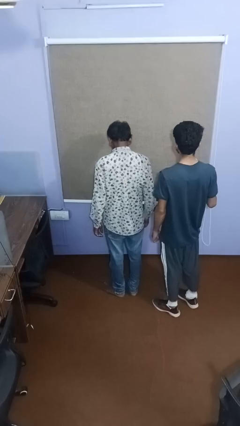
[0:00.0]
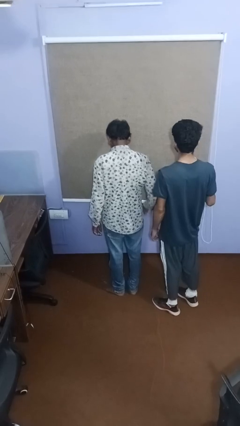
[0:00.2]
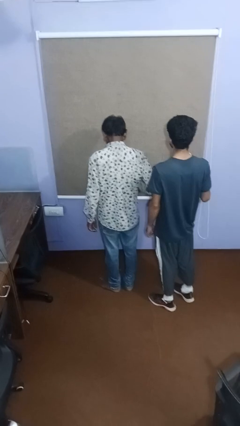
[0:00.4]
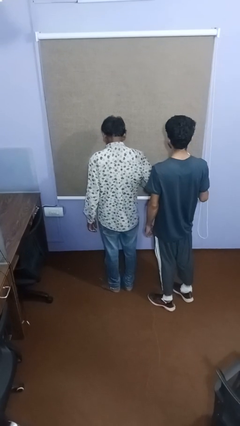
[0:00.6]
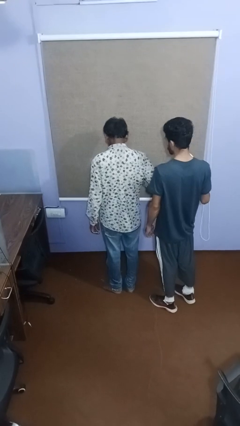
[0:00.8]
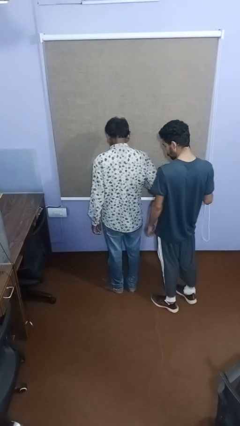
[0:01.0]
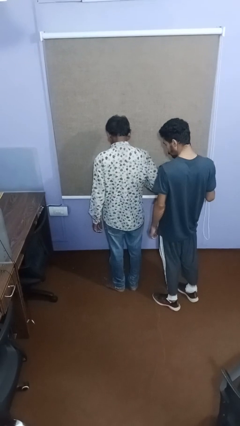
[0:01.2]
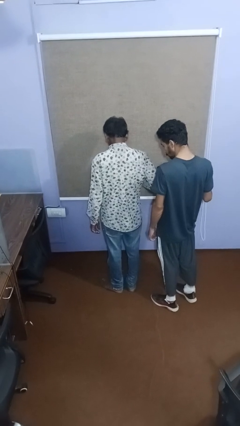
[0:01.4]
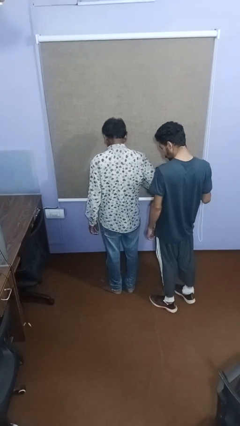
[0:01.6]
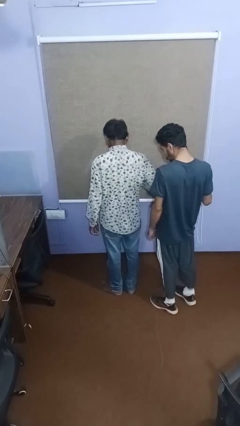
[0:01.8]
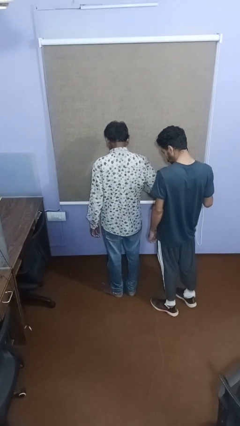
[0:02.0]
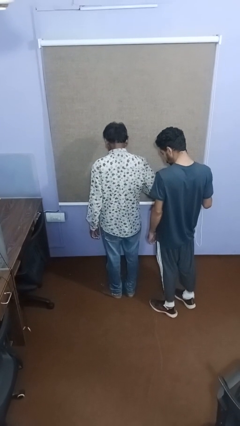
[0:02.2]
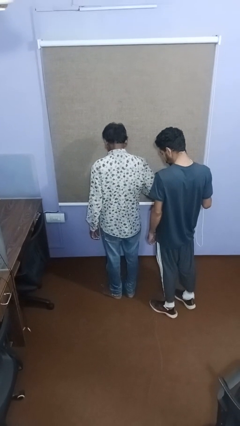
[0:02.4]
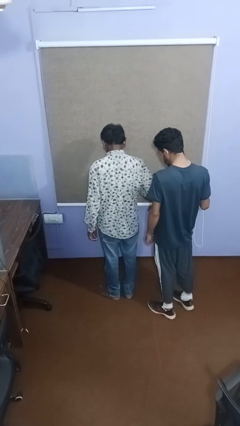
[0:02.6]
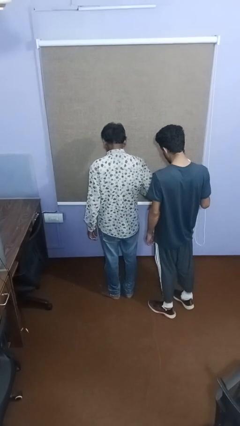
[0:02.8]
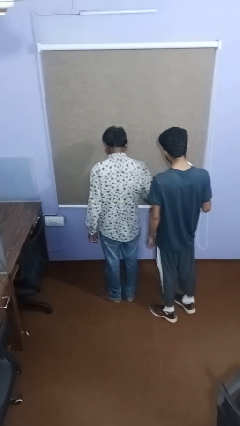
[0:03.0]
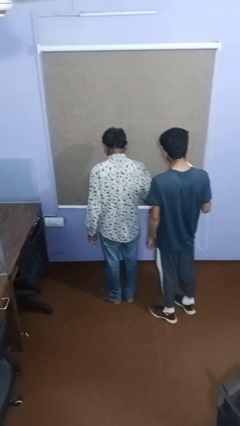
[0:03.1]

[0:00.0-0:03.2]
person nudges person with elbow

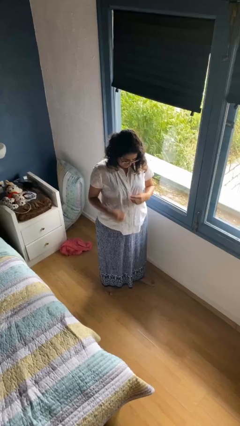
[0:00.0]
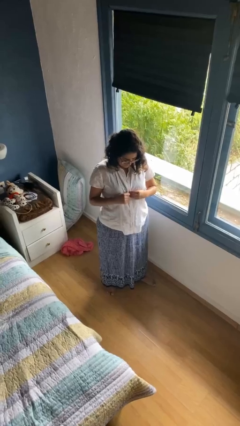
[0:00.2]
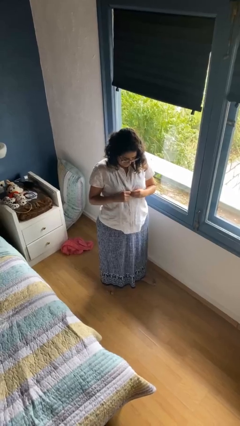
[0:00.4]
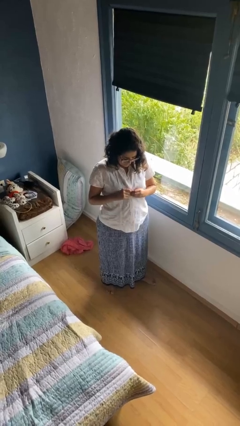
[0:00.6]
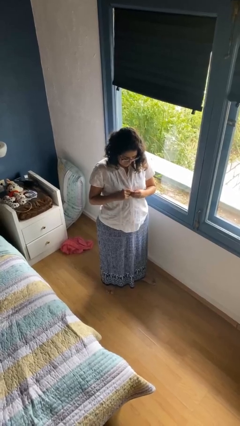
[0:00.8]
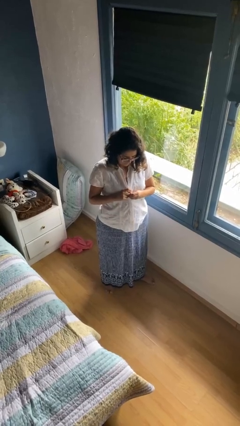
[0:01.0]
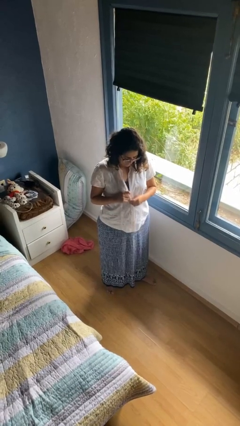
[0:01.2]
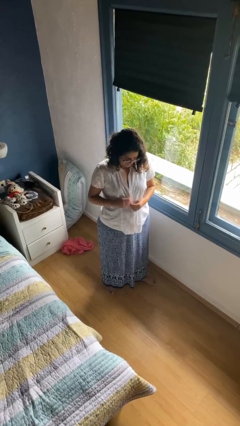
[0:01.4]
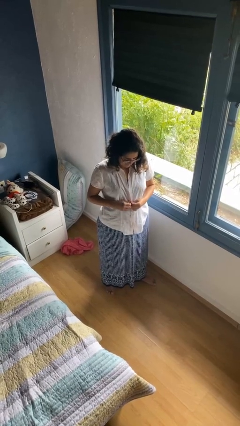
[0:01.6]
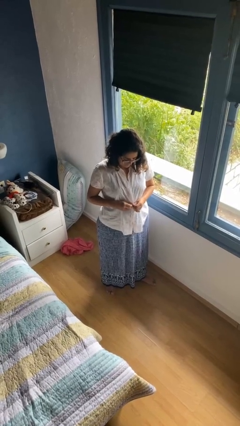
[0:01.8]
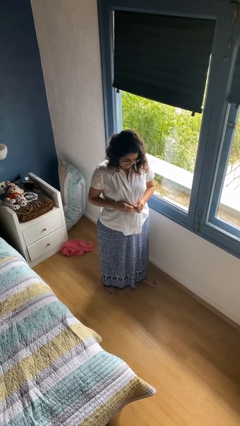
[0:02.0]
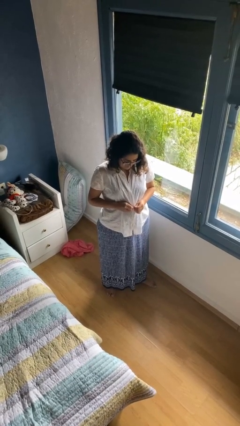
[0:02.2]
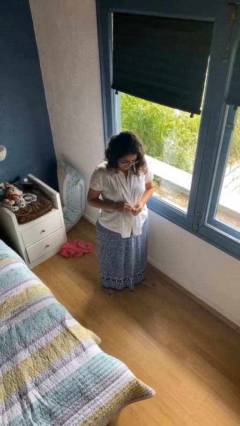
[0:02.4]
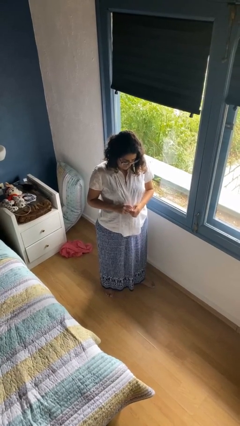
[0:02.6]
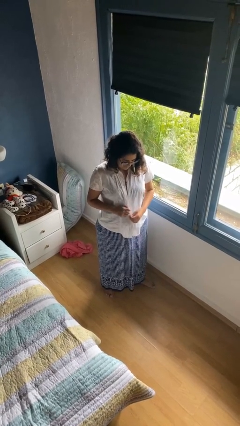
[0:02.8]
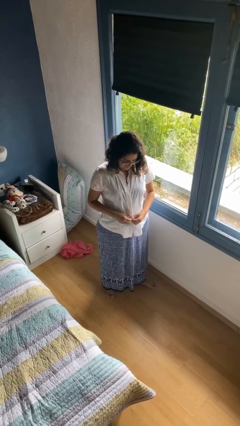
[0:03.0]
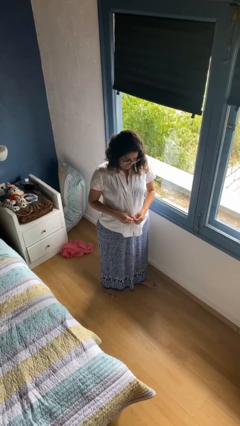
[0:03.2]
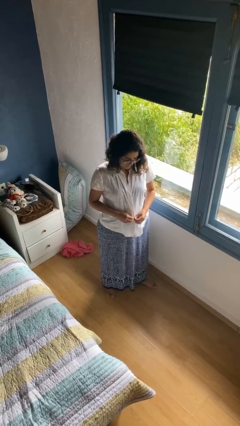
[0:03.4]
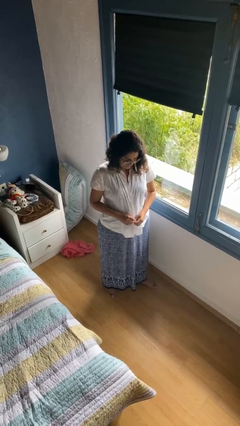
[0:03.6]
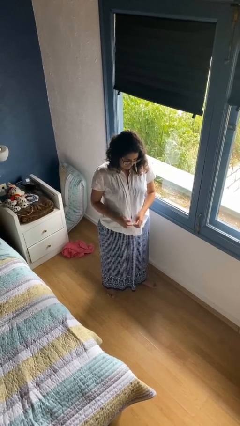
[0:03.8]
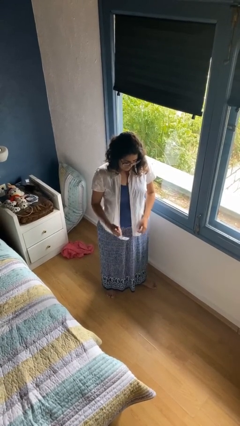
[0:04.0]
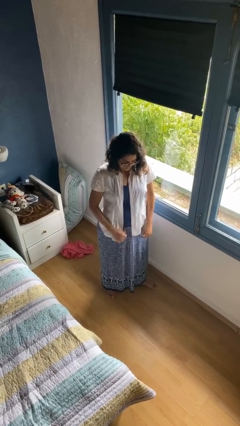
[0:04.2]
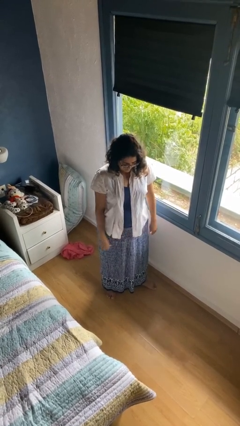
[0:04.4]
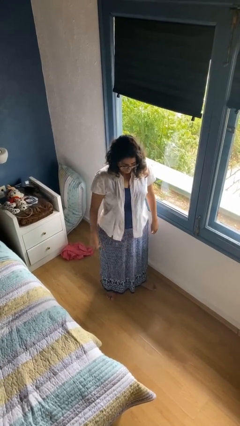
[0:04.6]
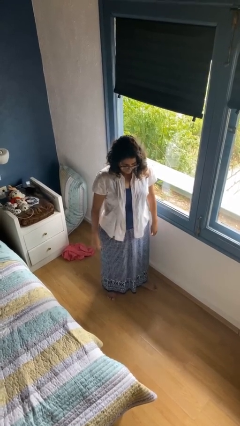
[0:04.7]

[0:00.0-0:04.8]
person unbuttons shirt

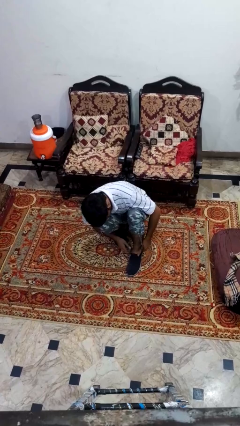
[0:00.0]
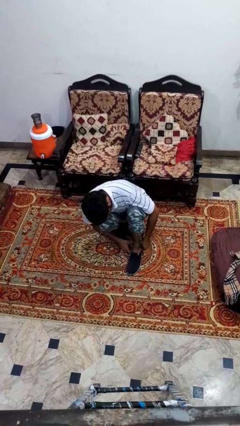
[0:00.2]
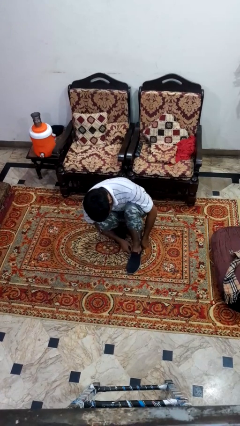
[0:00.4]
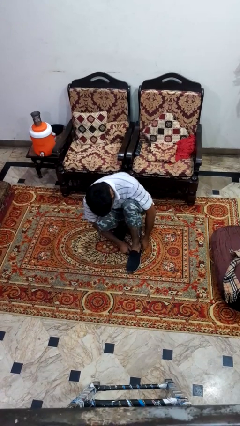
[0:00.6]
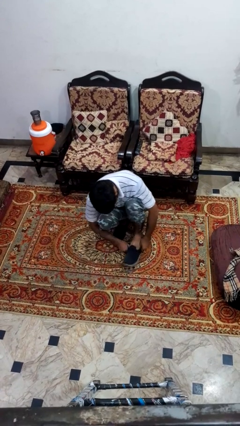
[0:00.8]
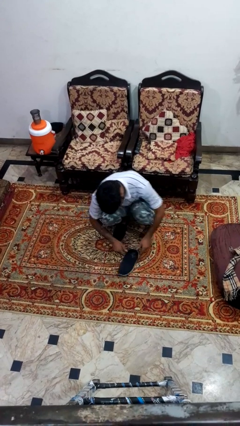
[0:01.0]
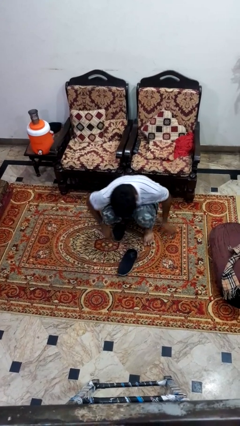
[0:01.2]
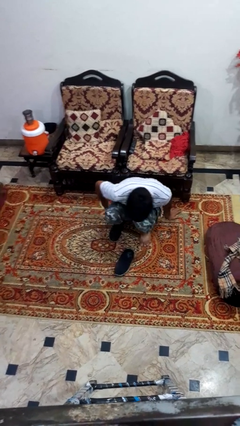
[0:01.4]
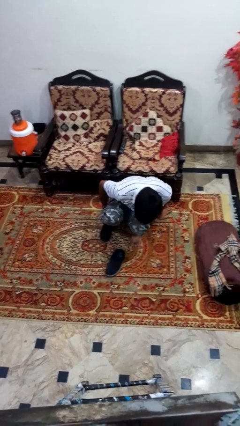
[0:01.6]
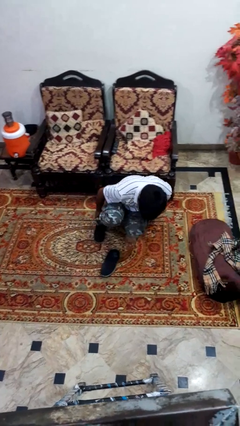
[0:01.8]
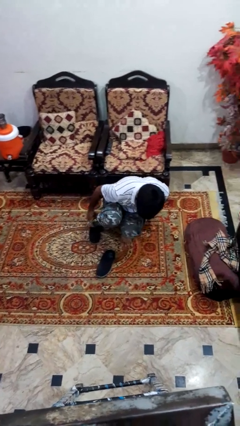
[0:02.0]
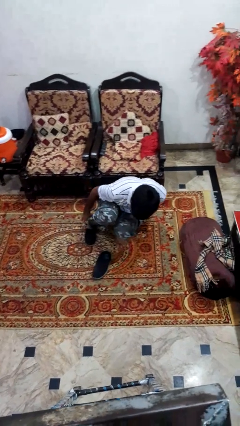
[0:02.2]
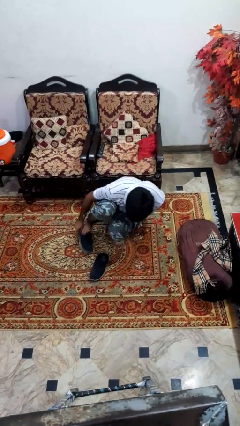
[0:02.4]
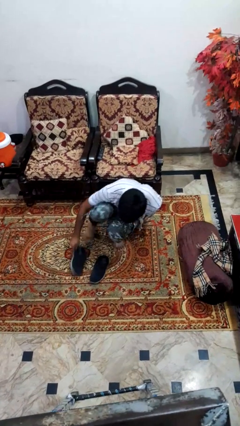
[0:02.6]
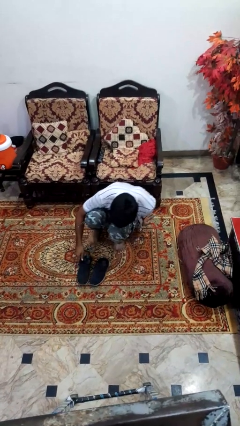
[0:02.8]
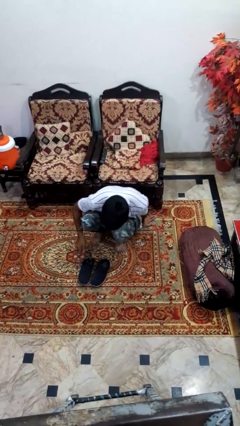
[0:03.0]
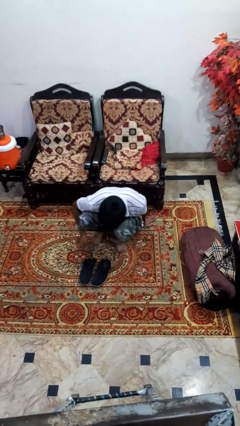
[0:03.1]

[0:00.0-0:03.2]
person takes off shoes

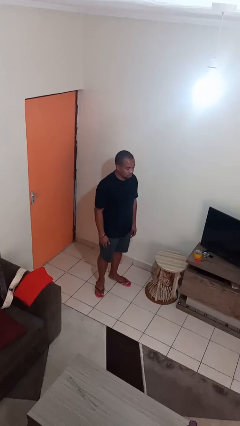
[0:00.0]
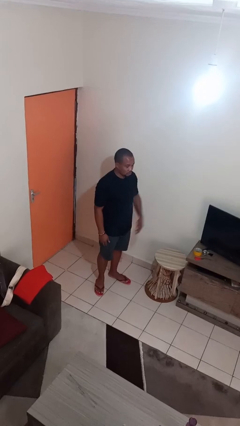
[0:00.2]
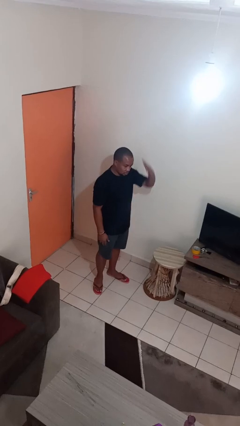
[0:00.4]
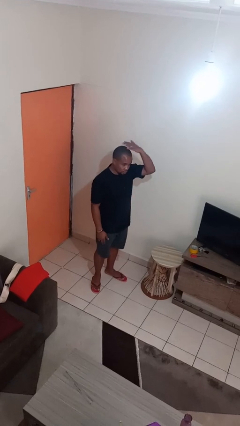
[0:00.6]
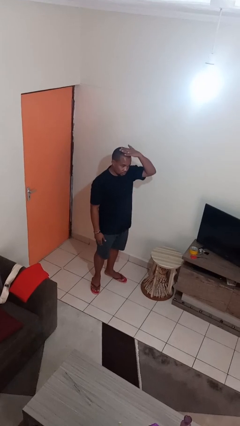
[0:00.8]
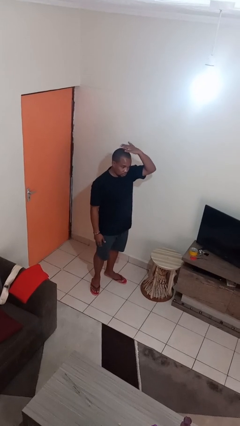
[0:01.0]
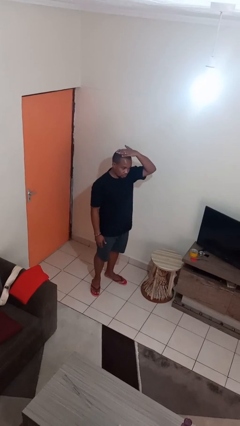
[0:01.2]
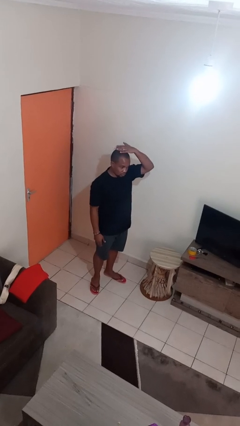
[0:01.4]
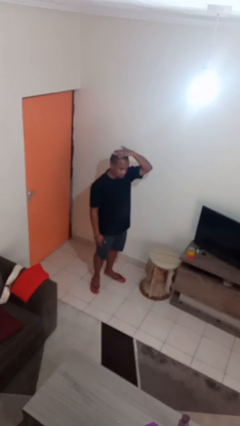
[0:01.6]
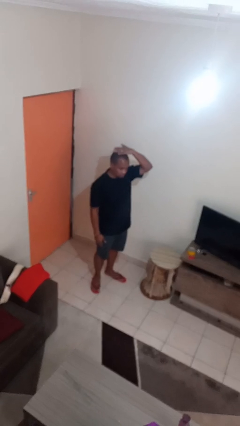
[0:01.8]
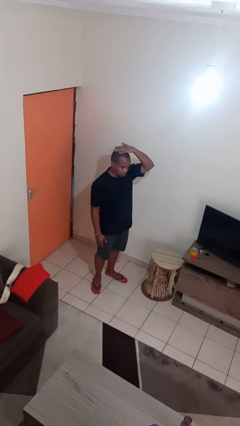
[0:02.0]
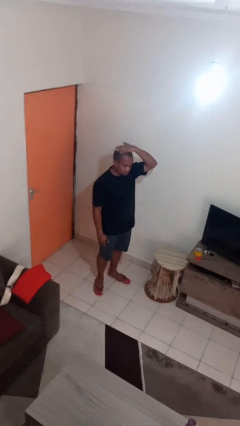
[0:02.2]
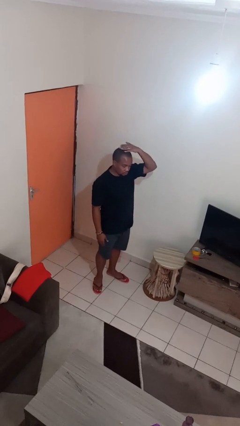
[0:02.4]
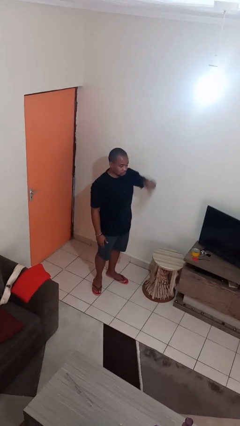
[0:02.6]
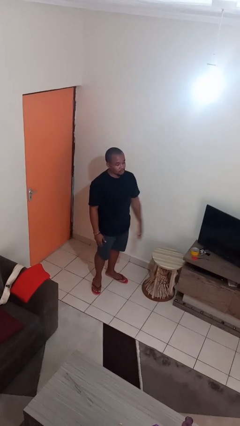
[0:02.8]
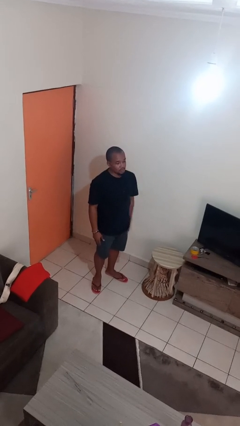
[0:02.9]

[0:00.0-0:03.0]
person pats head

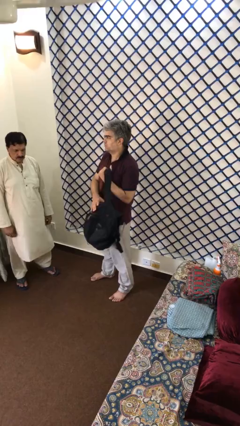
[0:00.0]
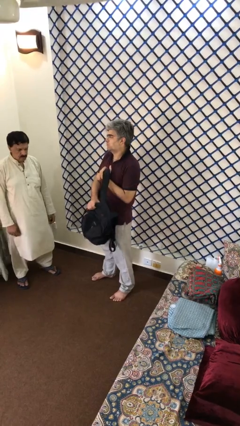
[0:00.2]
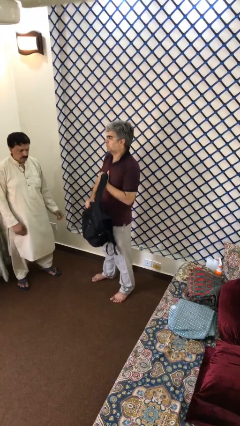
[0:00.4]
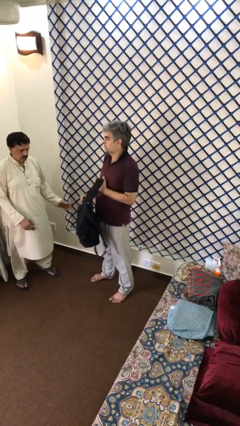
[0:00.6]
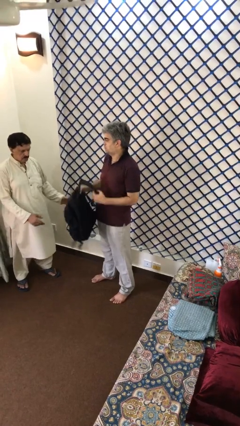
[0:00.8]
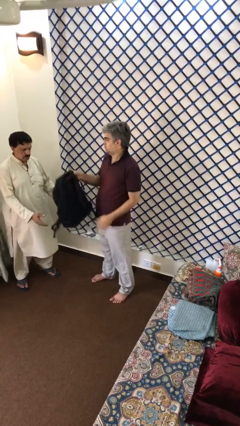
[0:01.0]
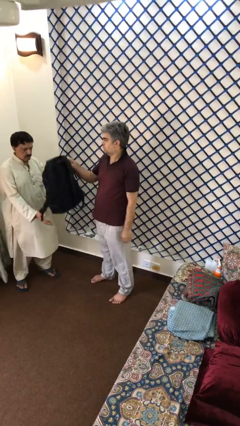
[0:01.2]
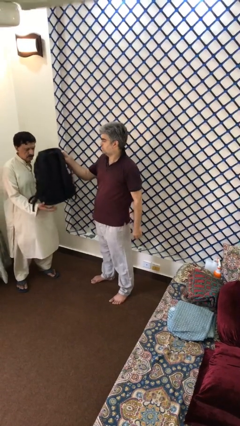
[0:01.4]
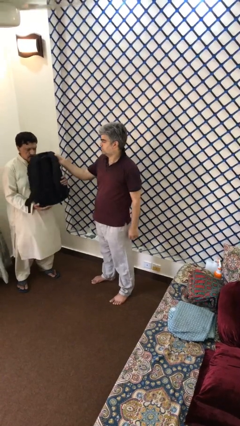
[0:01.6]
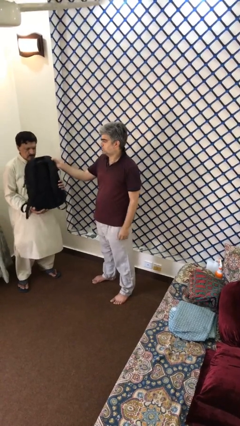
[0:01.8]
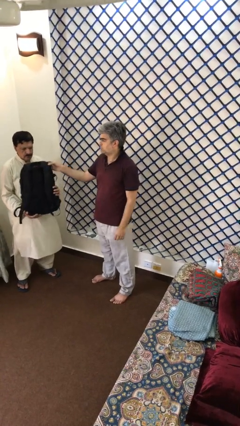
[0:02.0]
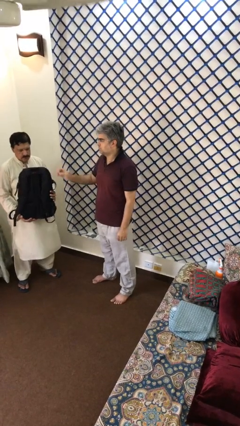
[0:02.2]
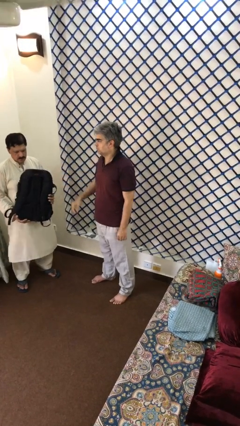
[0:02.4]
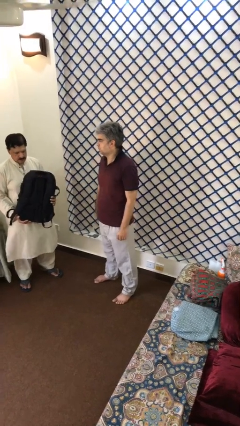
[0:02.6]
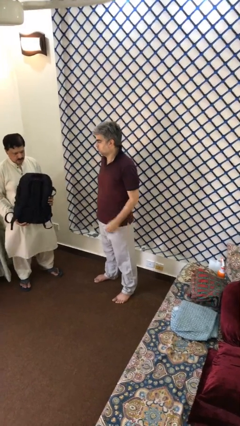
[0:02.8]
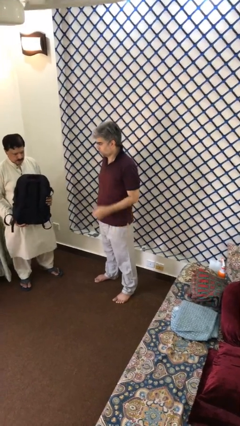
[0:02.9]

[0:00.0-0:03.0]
person transfers object to person

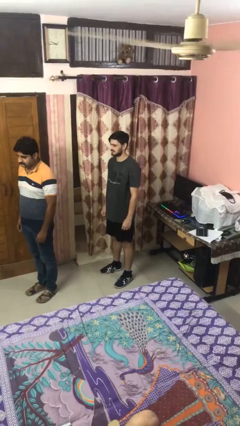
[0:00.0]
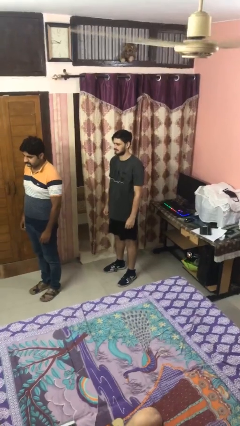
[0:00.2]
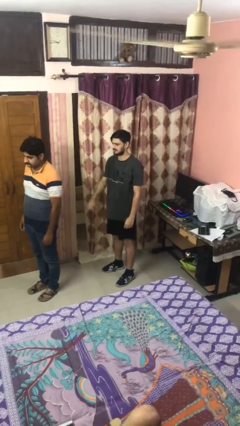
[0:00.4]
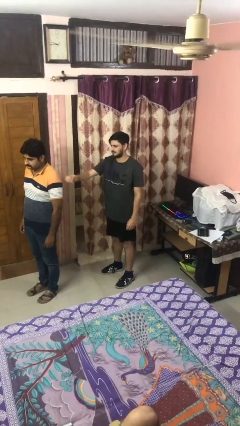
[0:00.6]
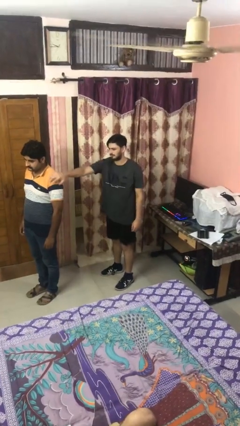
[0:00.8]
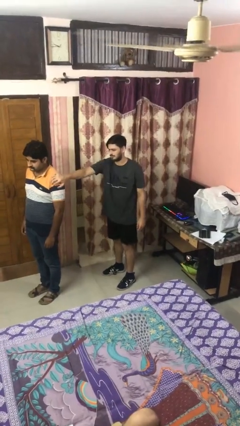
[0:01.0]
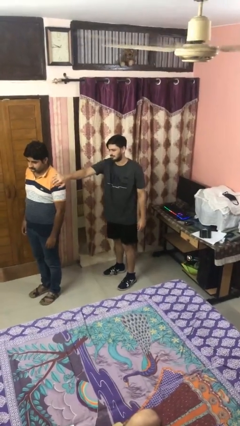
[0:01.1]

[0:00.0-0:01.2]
person grabs person by shoulder
